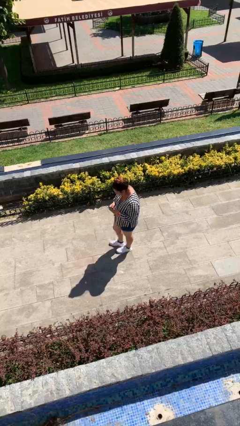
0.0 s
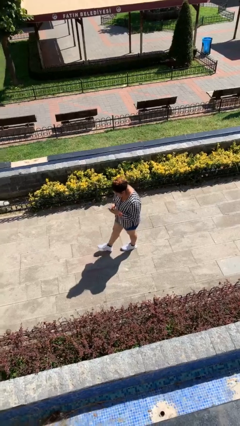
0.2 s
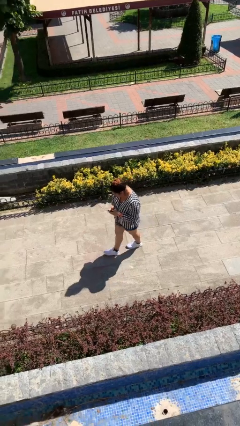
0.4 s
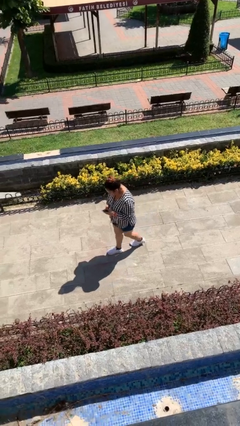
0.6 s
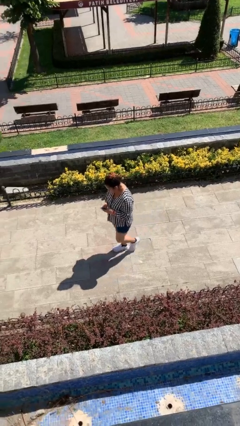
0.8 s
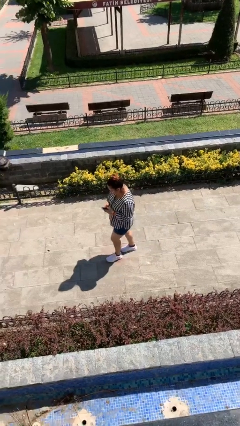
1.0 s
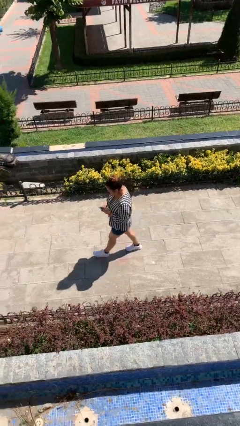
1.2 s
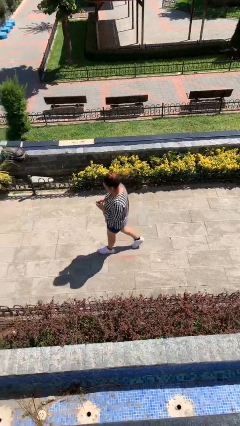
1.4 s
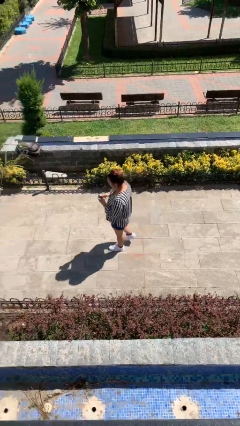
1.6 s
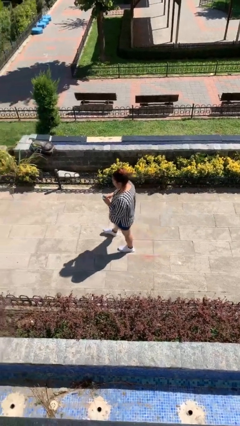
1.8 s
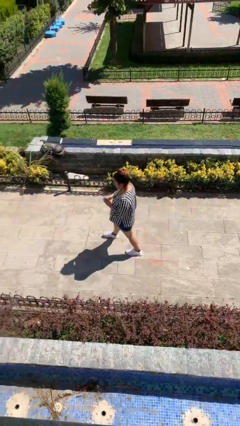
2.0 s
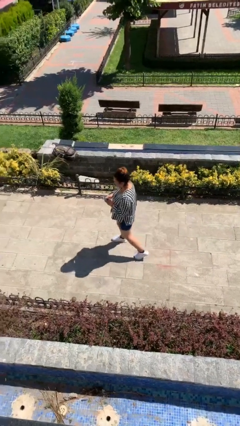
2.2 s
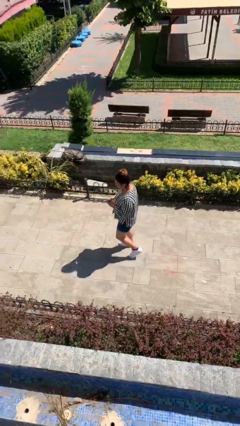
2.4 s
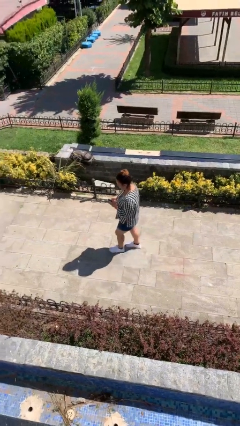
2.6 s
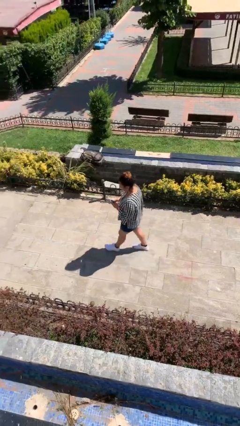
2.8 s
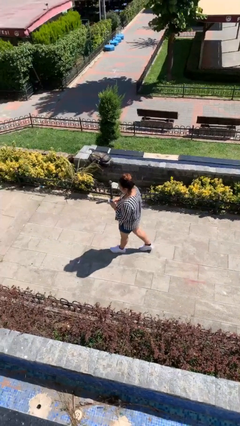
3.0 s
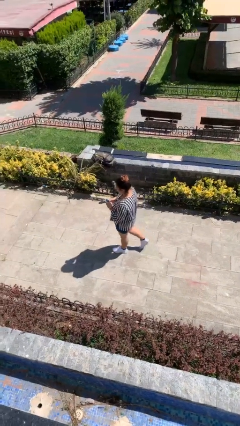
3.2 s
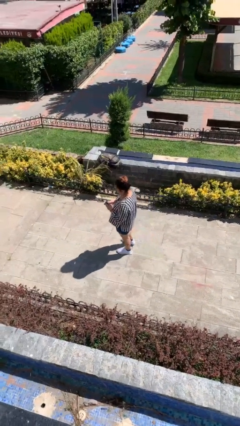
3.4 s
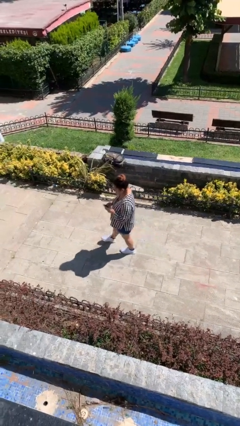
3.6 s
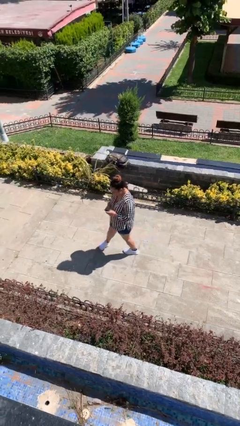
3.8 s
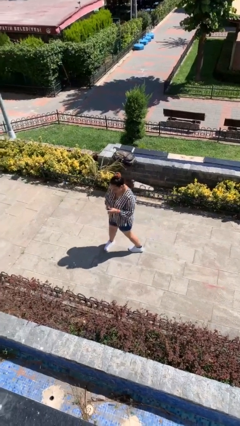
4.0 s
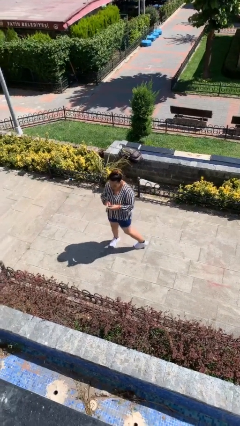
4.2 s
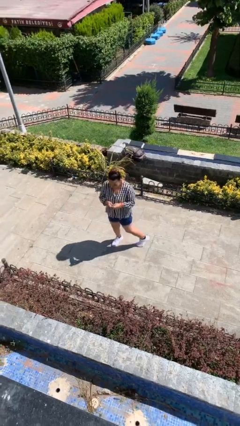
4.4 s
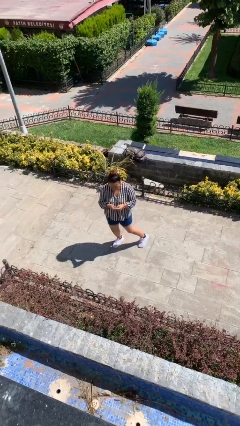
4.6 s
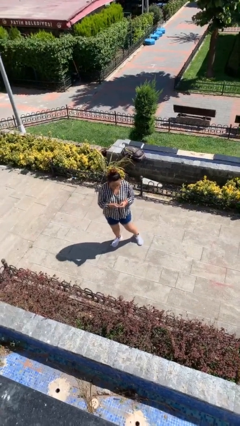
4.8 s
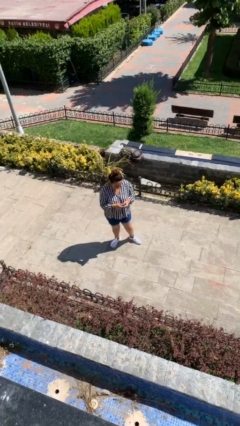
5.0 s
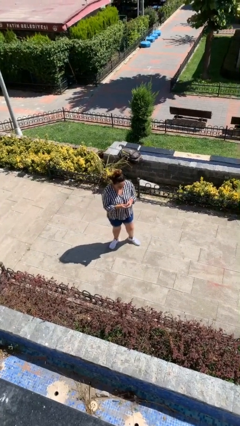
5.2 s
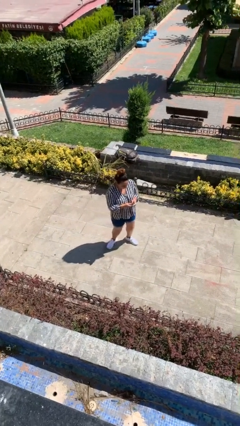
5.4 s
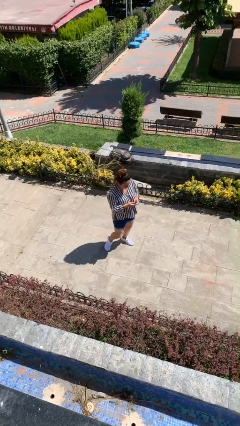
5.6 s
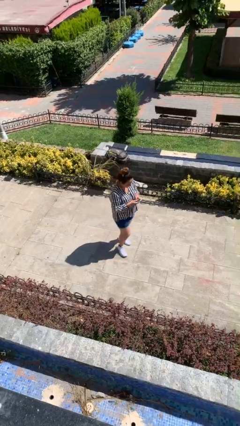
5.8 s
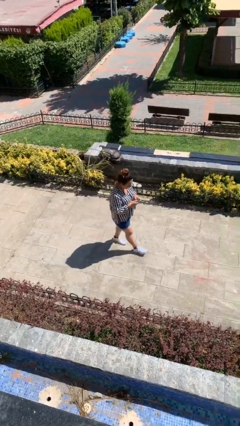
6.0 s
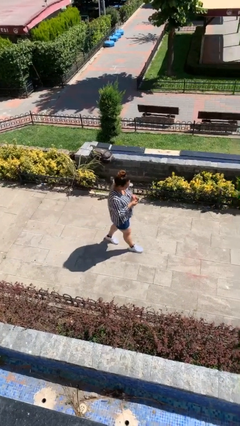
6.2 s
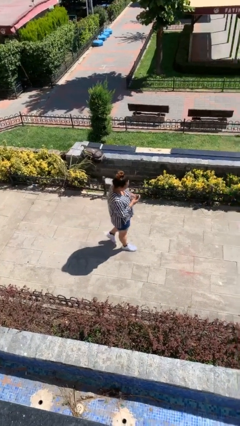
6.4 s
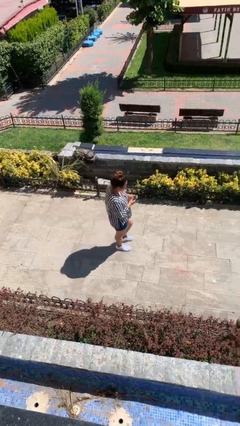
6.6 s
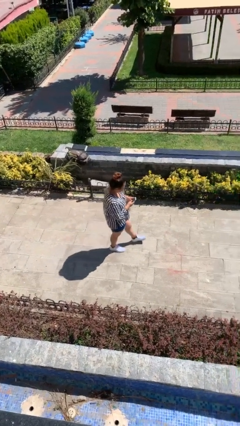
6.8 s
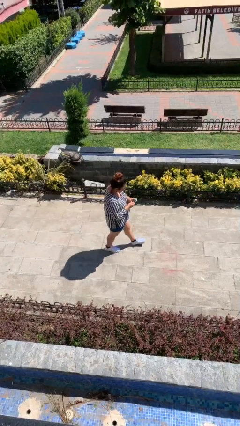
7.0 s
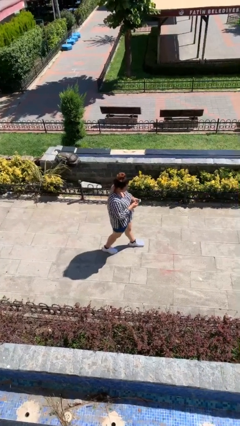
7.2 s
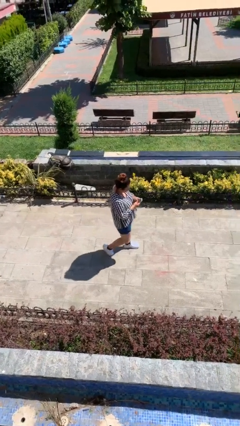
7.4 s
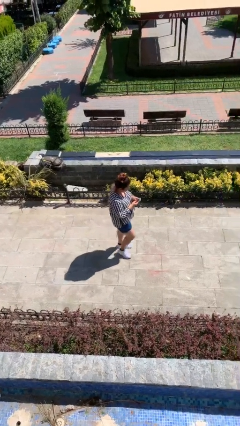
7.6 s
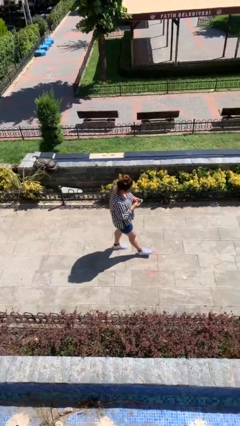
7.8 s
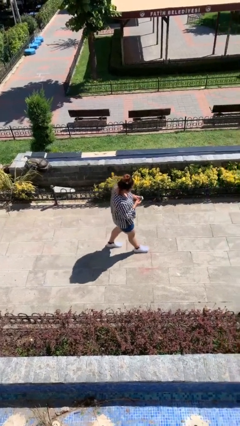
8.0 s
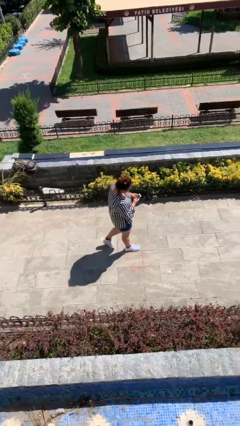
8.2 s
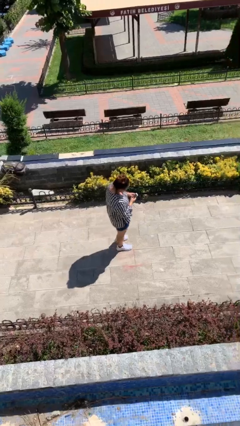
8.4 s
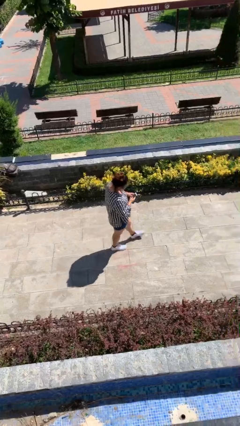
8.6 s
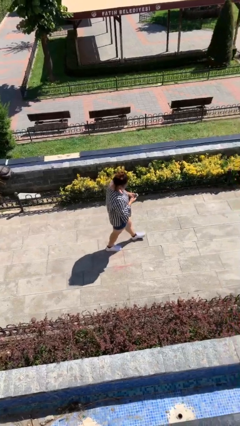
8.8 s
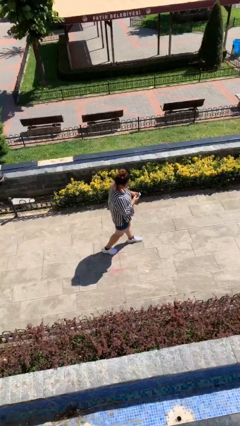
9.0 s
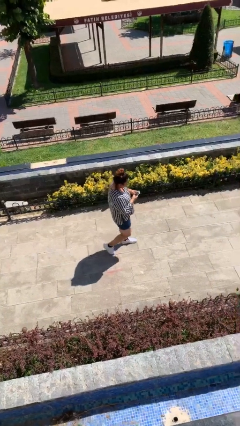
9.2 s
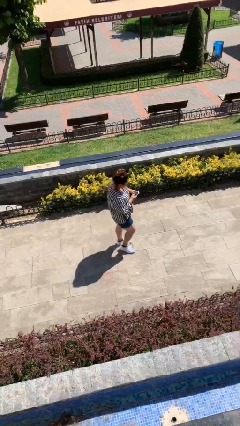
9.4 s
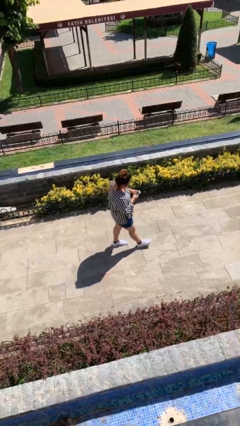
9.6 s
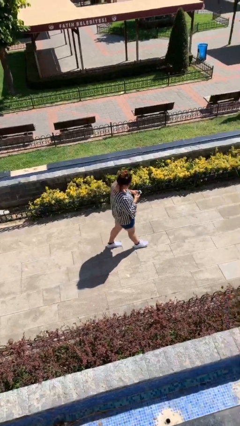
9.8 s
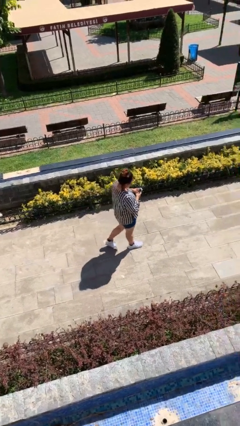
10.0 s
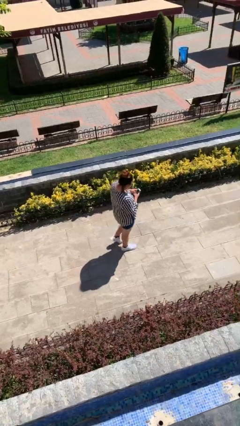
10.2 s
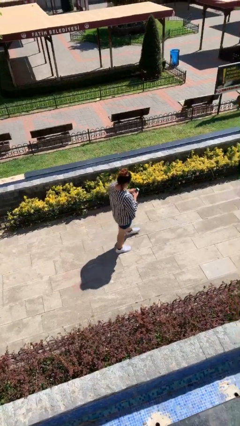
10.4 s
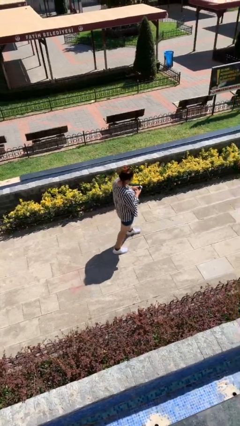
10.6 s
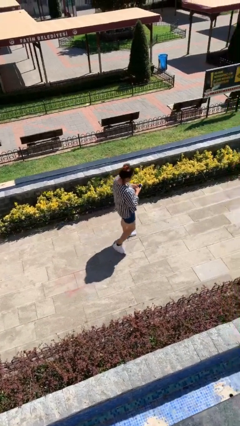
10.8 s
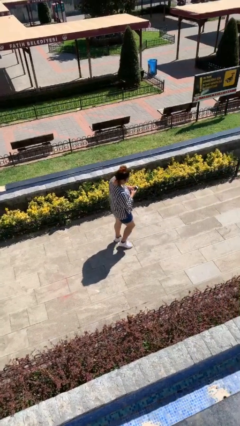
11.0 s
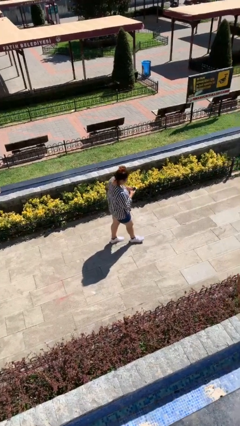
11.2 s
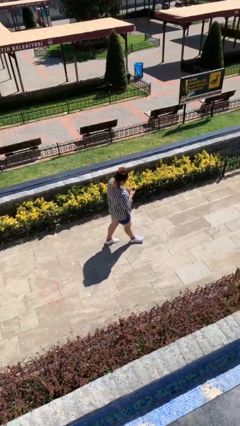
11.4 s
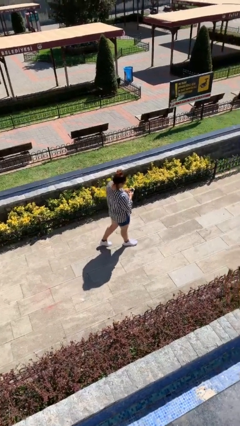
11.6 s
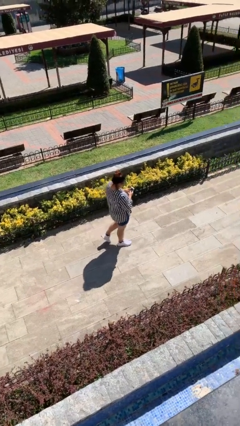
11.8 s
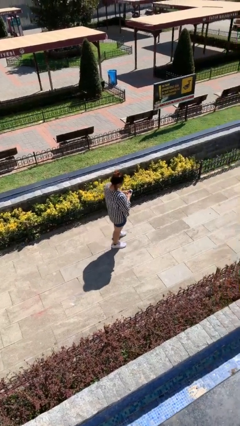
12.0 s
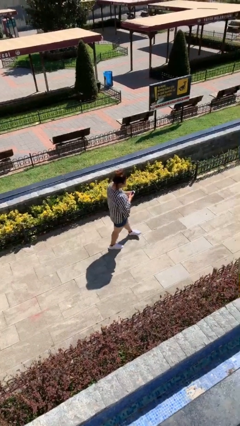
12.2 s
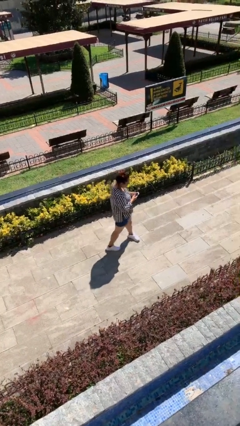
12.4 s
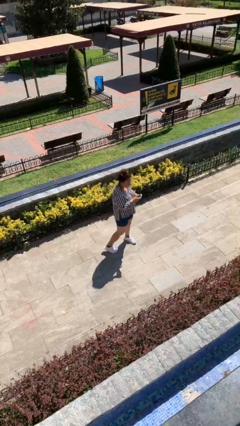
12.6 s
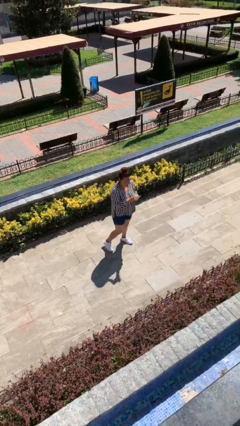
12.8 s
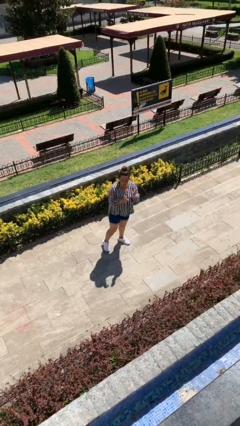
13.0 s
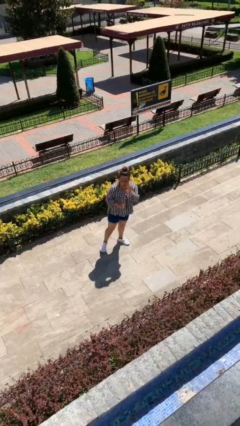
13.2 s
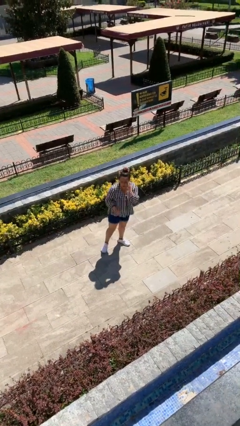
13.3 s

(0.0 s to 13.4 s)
person texts on phone

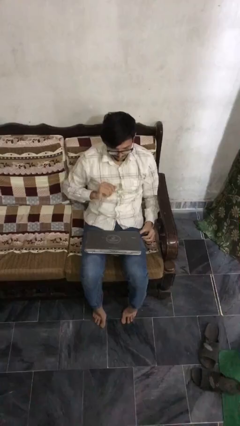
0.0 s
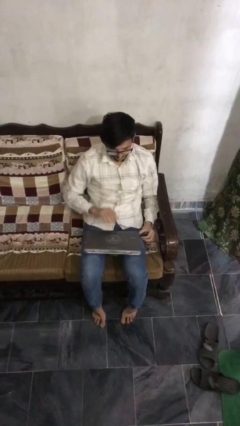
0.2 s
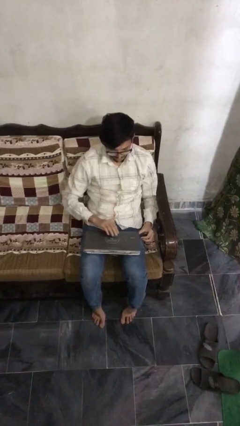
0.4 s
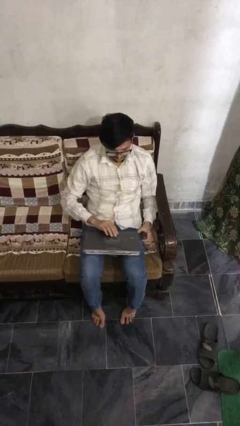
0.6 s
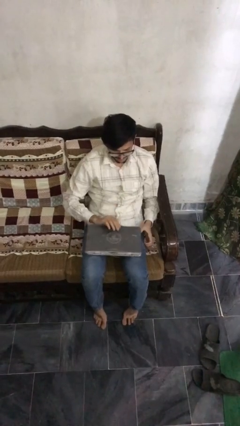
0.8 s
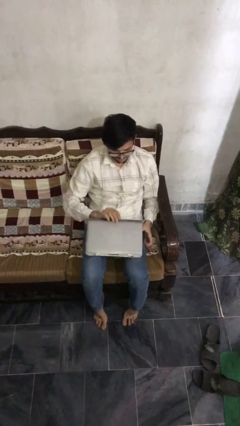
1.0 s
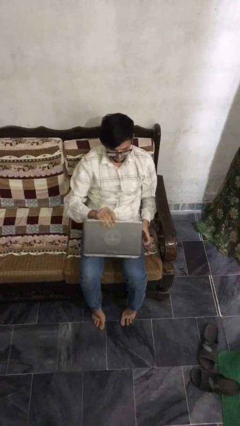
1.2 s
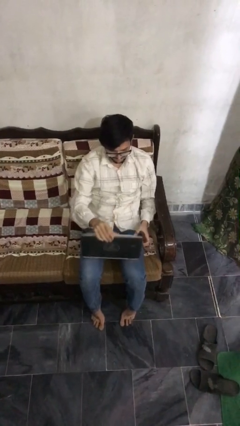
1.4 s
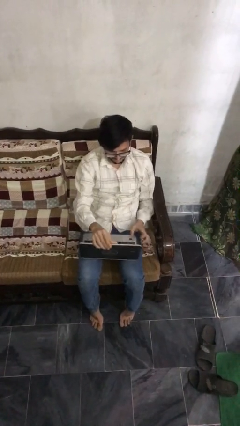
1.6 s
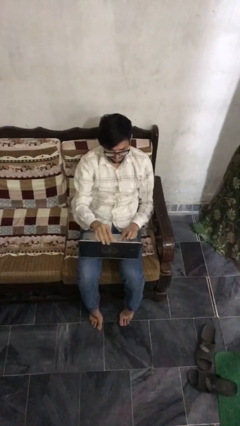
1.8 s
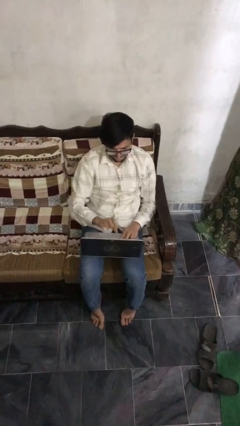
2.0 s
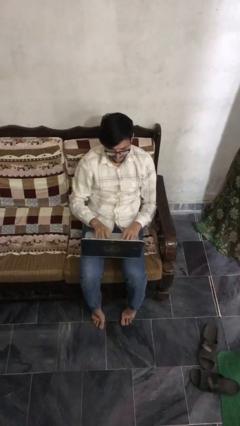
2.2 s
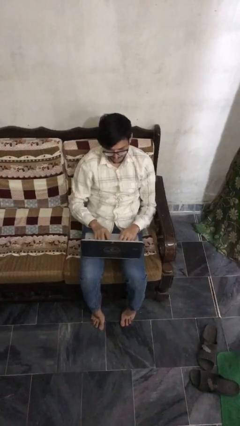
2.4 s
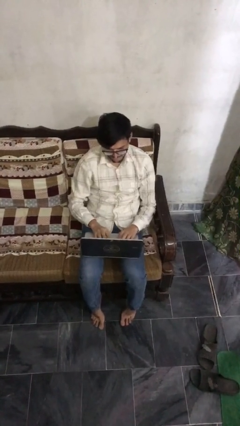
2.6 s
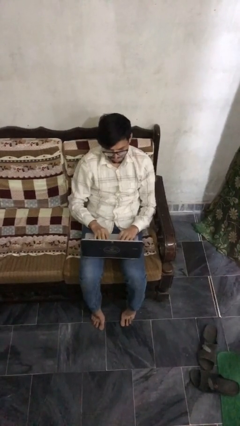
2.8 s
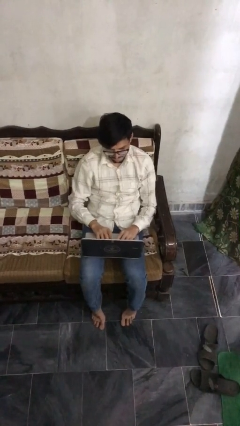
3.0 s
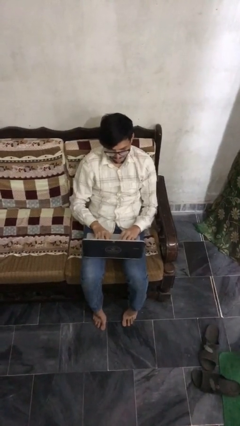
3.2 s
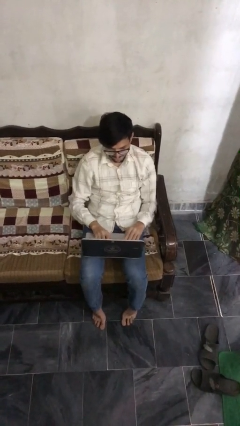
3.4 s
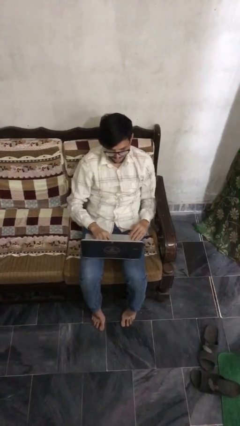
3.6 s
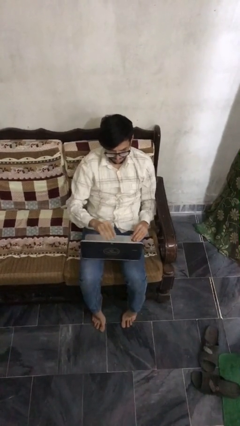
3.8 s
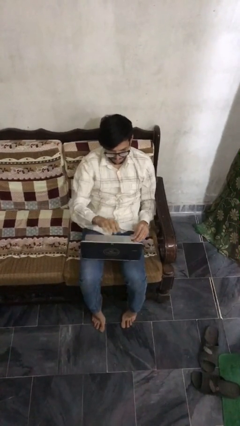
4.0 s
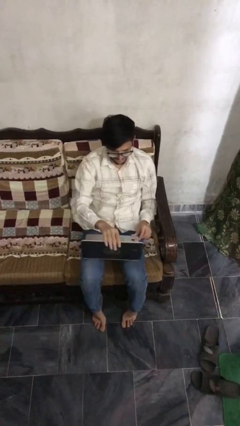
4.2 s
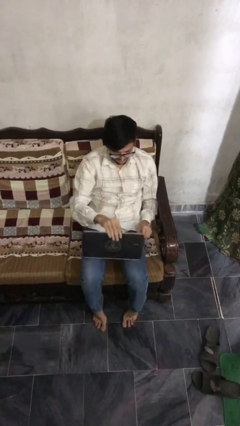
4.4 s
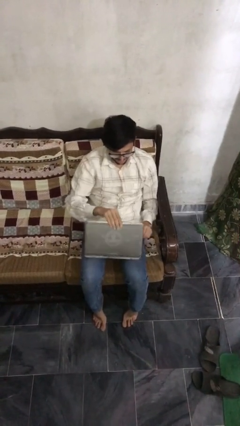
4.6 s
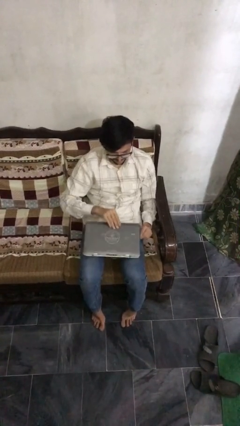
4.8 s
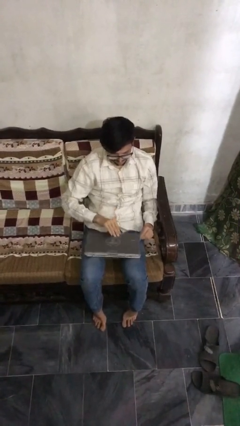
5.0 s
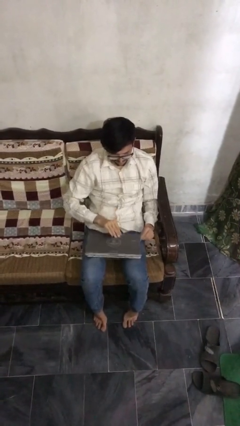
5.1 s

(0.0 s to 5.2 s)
person interacts with laptop
